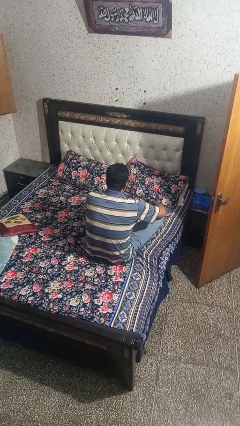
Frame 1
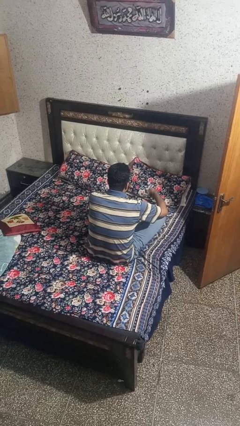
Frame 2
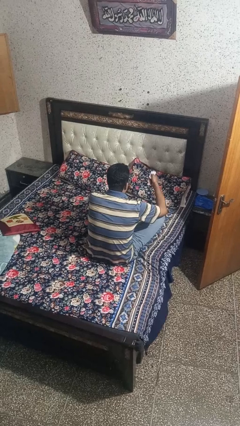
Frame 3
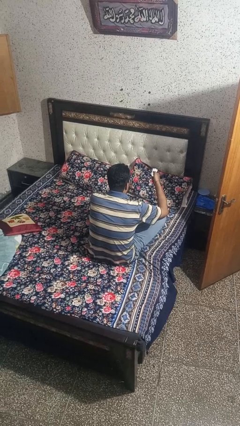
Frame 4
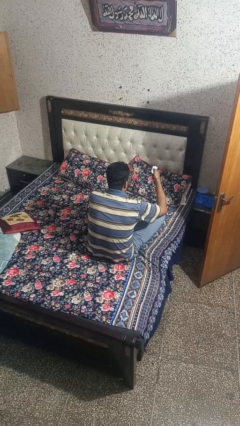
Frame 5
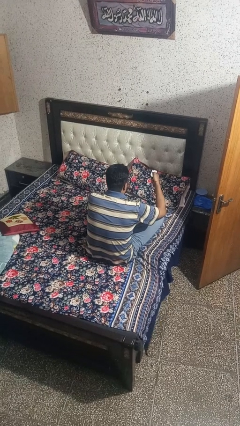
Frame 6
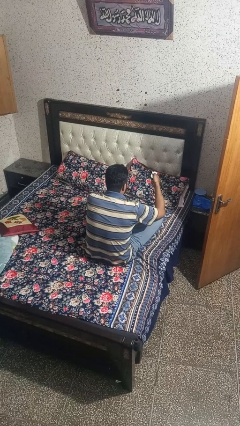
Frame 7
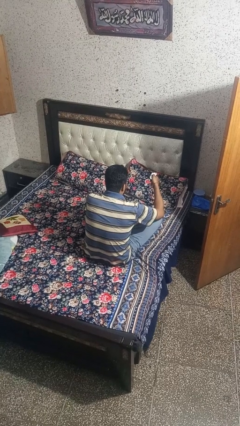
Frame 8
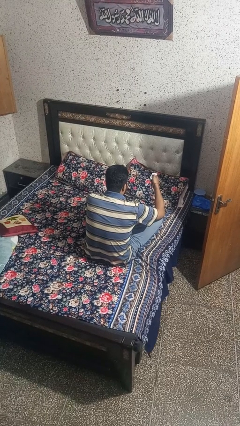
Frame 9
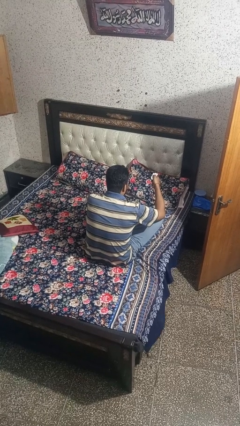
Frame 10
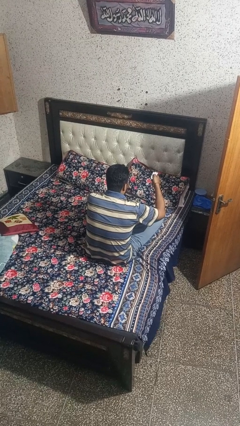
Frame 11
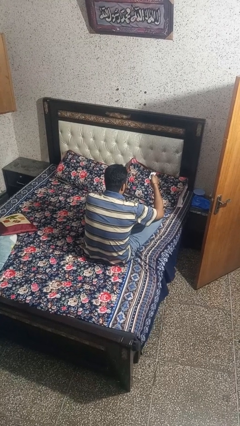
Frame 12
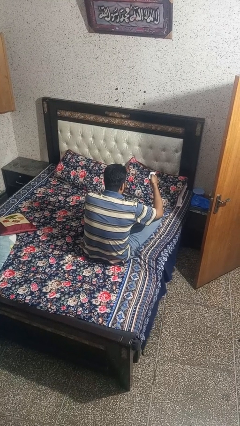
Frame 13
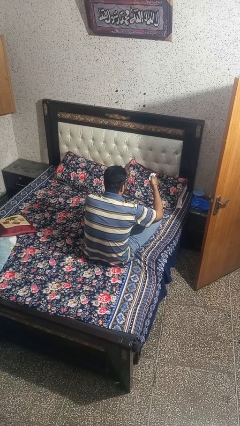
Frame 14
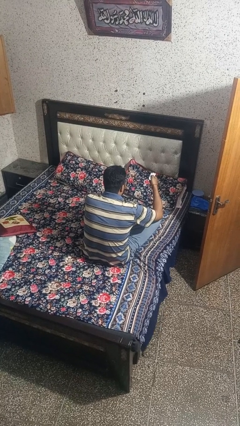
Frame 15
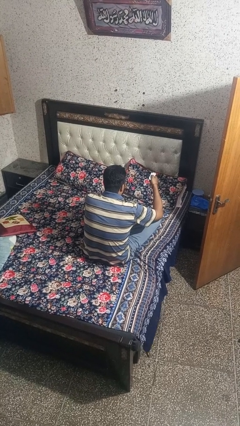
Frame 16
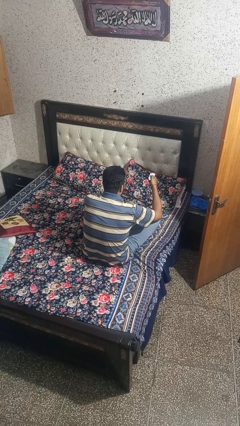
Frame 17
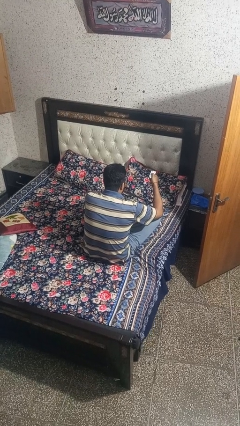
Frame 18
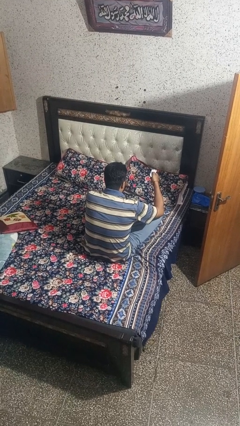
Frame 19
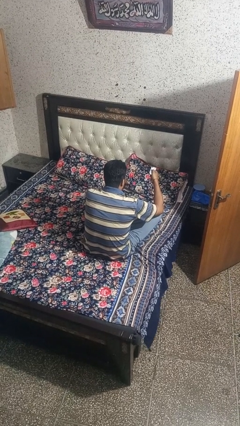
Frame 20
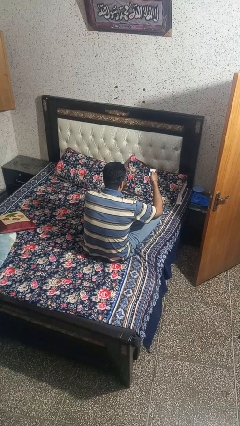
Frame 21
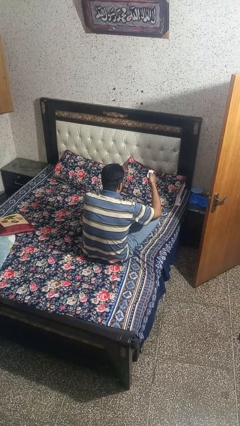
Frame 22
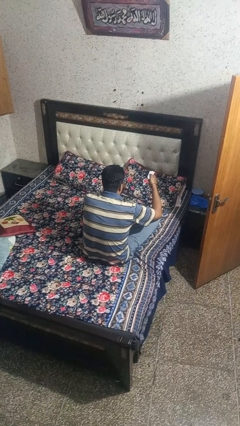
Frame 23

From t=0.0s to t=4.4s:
person uses television remote

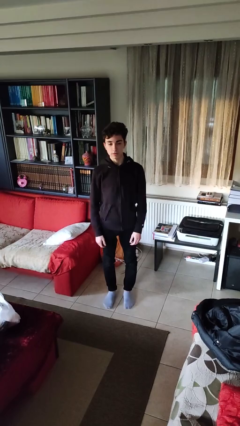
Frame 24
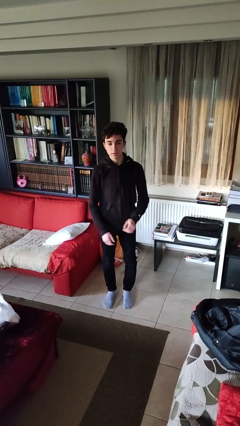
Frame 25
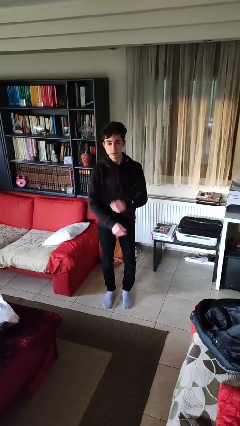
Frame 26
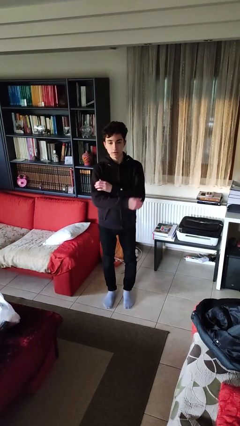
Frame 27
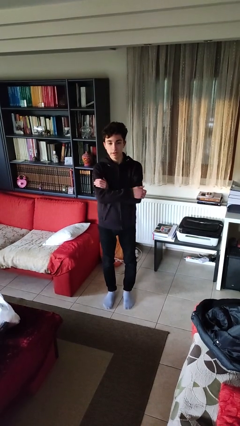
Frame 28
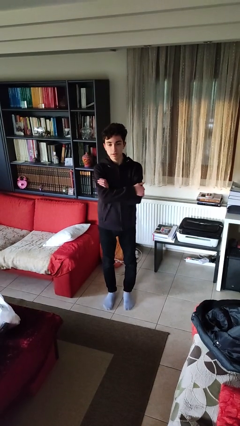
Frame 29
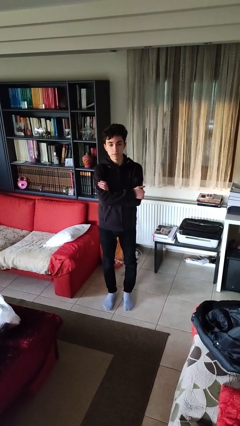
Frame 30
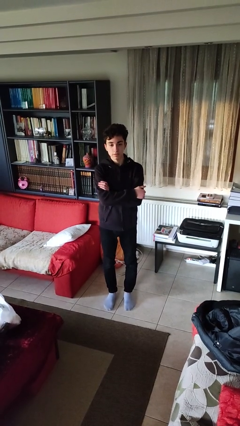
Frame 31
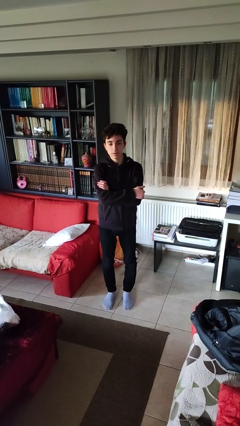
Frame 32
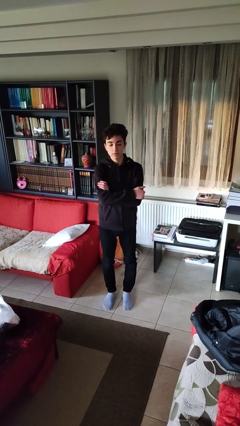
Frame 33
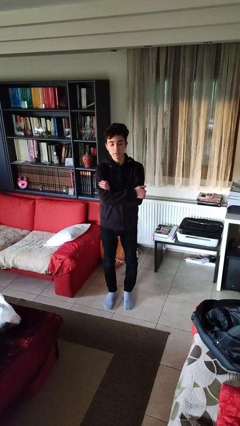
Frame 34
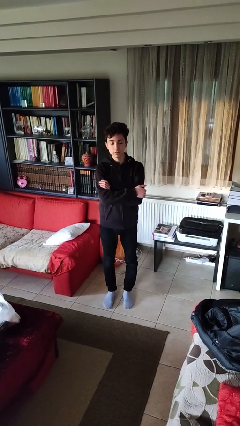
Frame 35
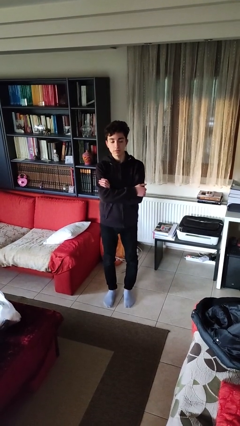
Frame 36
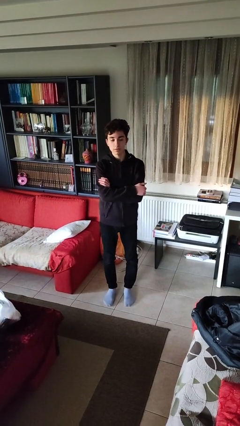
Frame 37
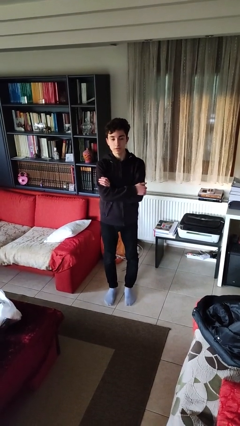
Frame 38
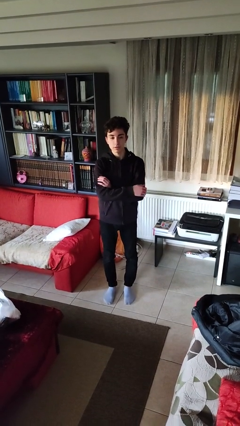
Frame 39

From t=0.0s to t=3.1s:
person crosses arms

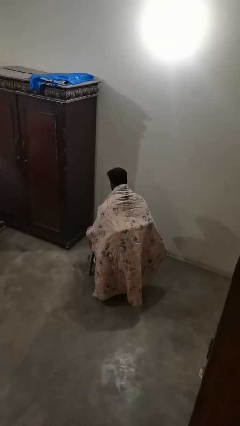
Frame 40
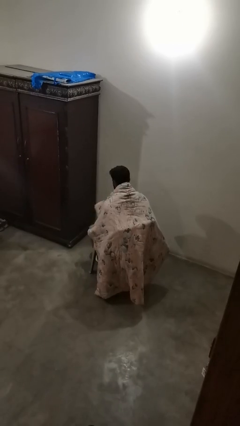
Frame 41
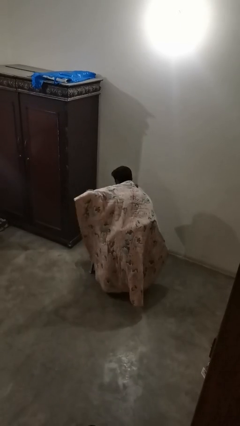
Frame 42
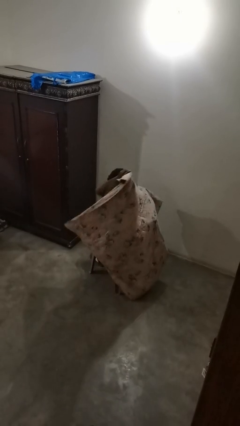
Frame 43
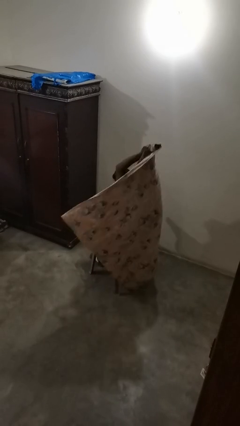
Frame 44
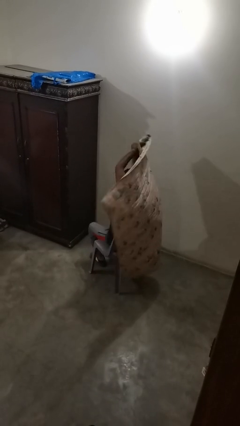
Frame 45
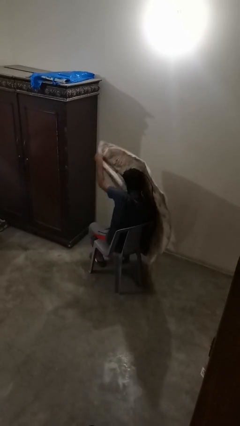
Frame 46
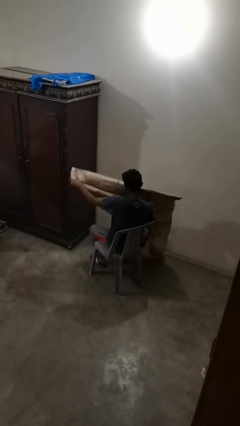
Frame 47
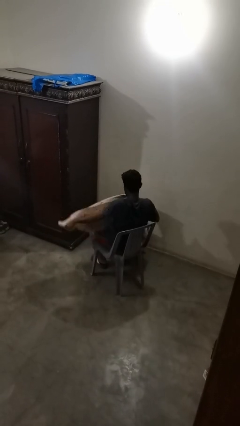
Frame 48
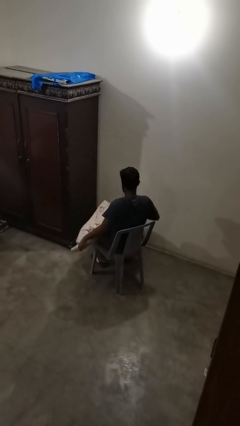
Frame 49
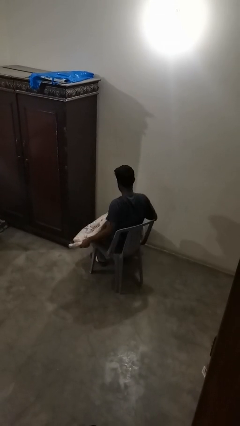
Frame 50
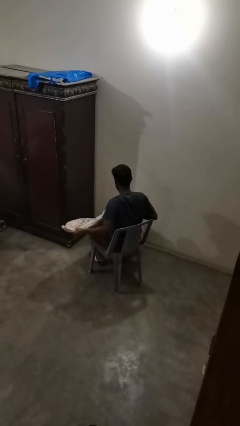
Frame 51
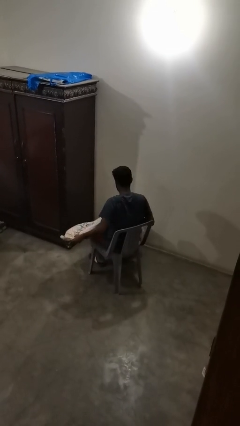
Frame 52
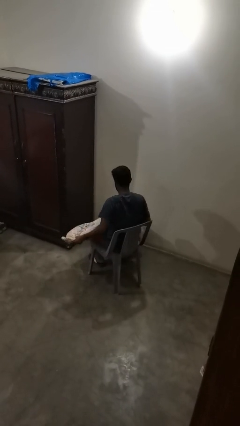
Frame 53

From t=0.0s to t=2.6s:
person uncovers with blanket

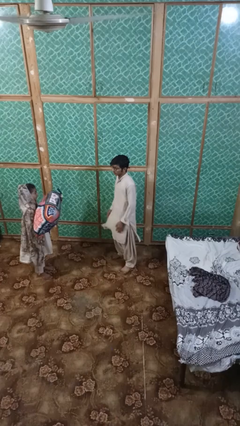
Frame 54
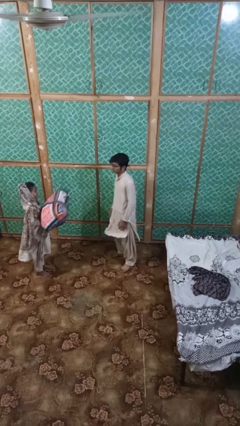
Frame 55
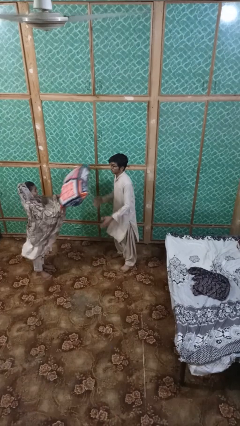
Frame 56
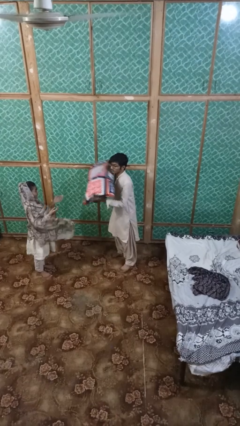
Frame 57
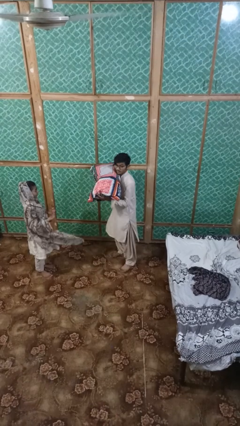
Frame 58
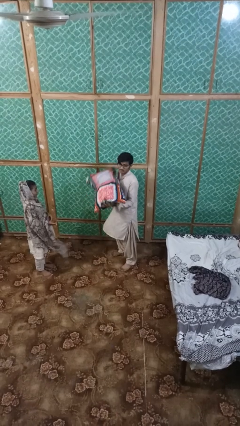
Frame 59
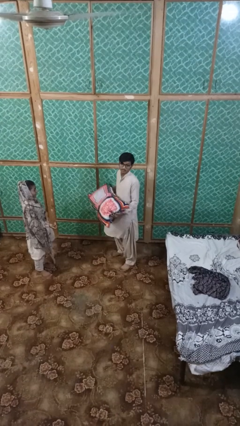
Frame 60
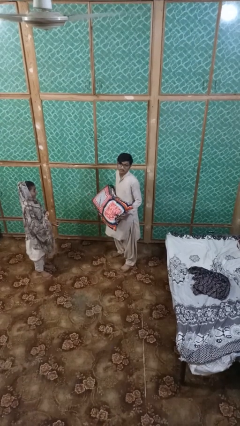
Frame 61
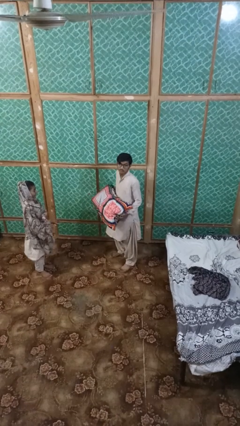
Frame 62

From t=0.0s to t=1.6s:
person catches object from person

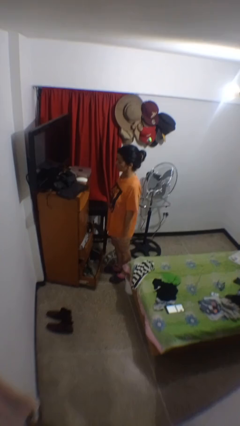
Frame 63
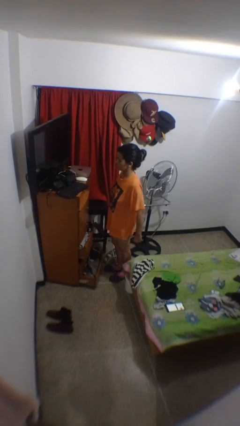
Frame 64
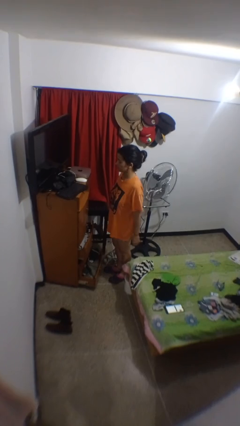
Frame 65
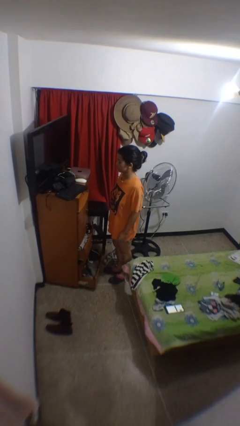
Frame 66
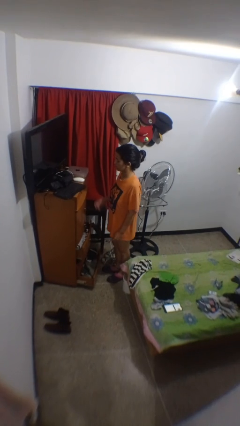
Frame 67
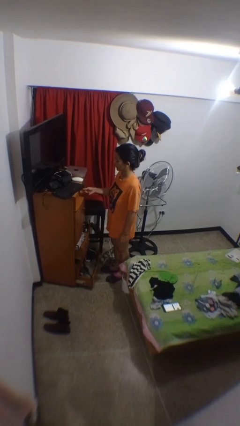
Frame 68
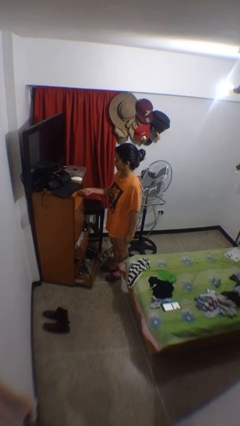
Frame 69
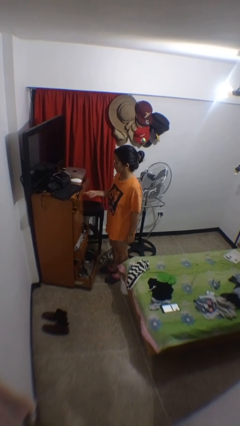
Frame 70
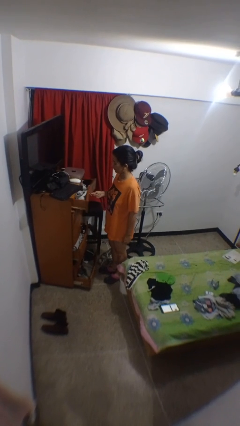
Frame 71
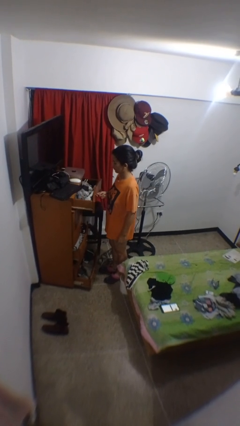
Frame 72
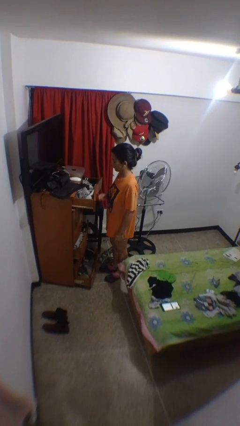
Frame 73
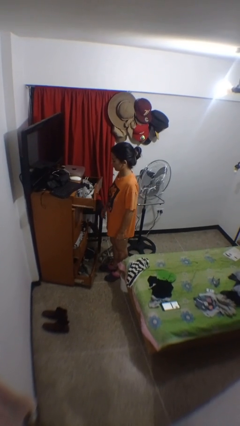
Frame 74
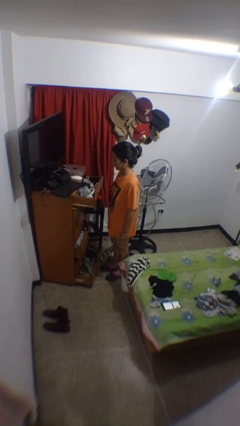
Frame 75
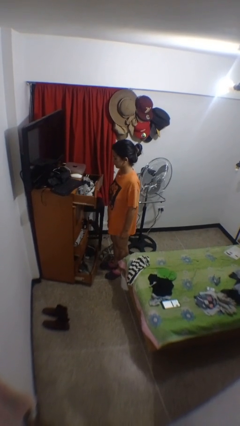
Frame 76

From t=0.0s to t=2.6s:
person opens dresser drawer

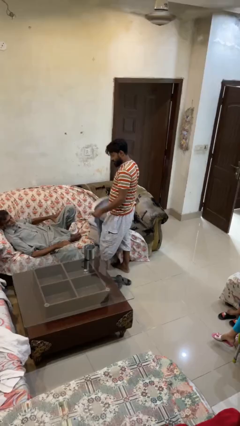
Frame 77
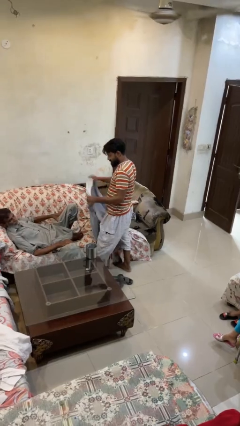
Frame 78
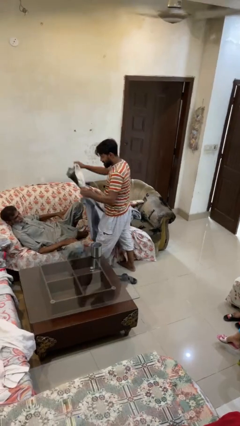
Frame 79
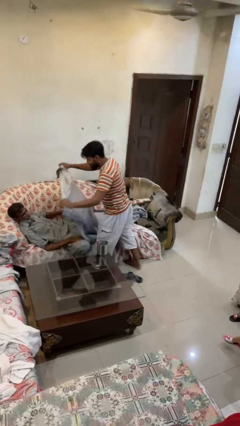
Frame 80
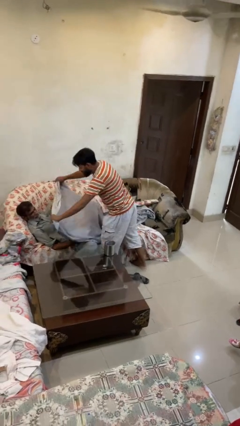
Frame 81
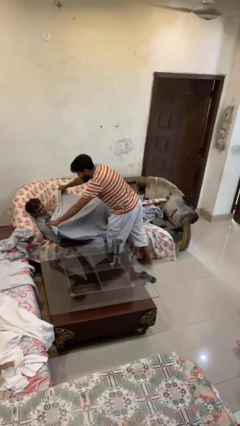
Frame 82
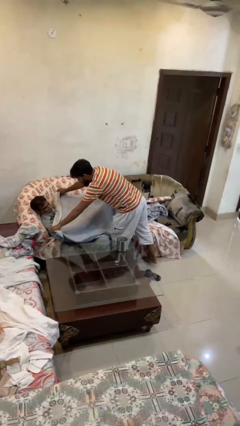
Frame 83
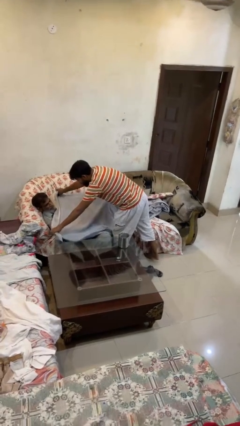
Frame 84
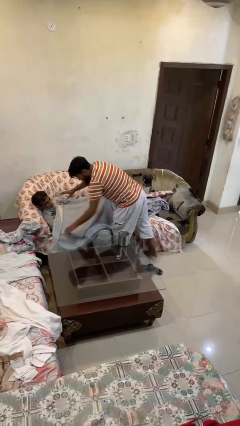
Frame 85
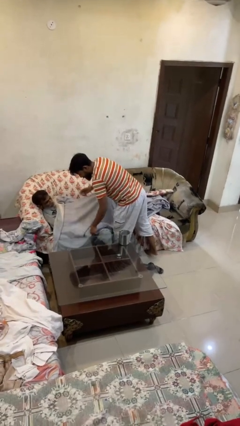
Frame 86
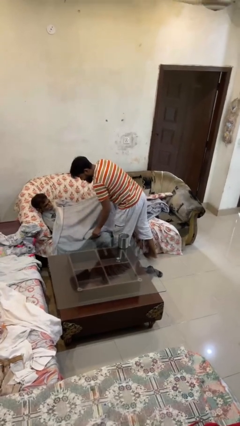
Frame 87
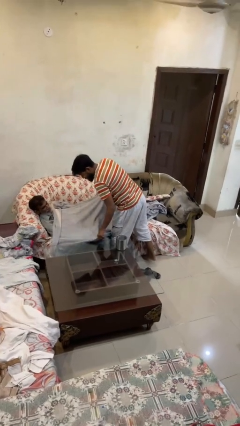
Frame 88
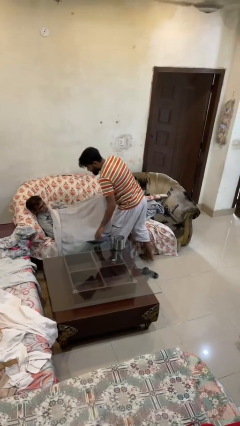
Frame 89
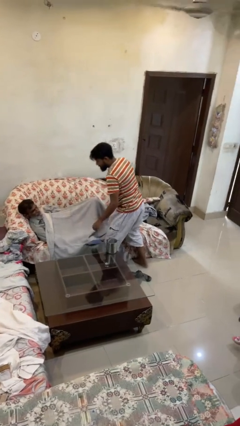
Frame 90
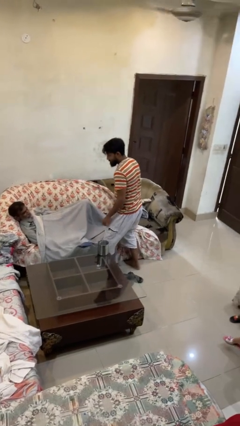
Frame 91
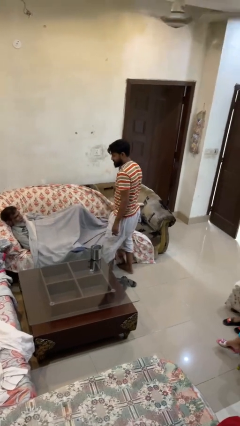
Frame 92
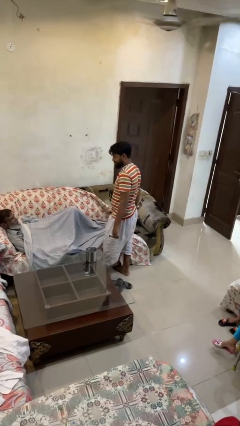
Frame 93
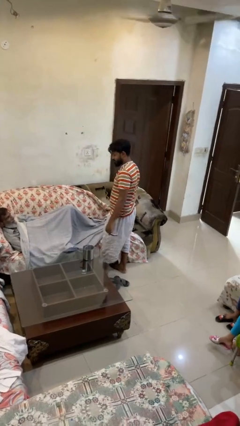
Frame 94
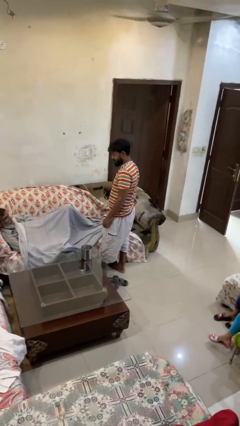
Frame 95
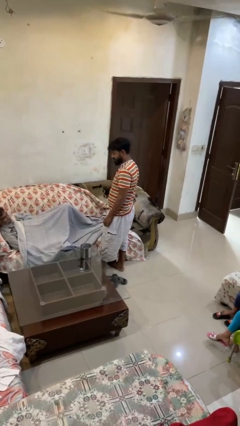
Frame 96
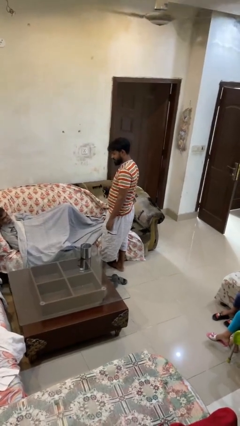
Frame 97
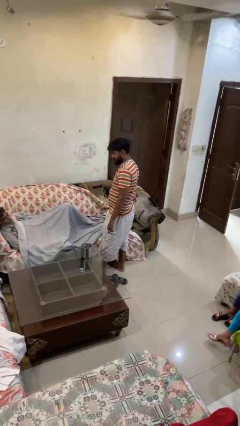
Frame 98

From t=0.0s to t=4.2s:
person covers friend with blanket
